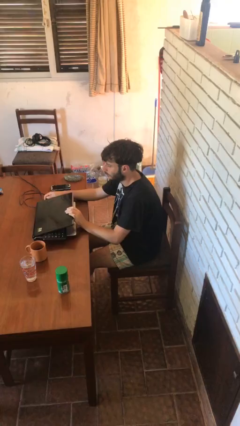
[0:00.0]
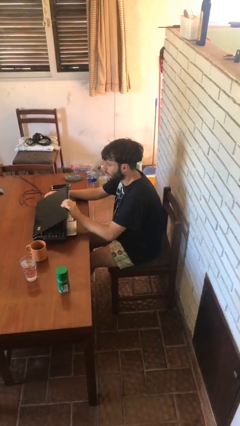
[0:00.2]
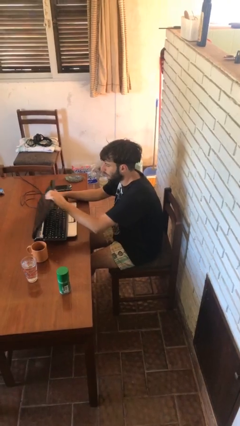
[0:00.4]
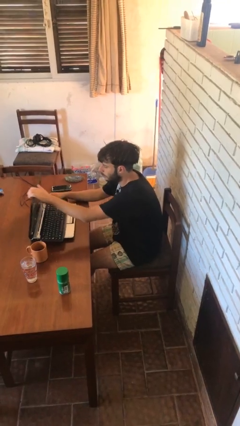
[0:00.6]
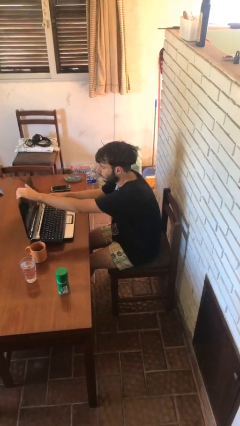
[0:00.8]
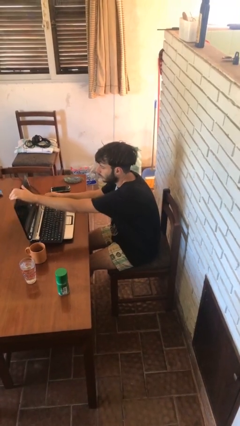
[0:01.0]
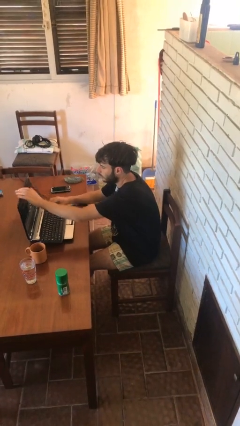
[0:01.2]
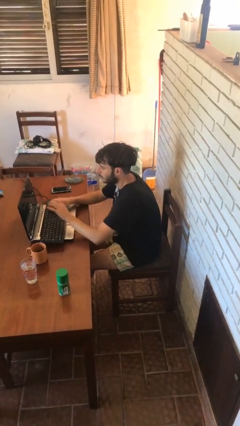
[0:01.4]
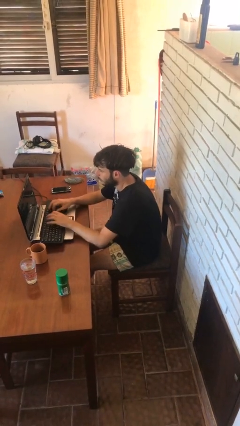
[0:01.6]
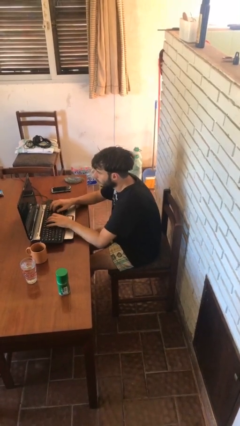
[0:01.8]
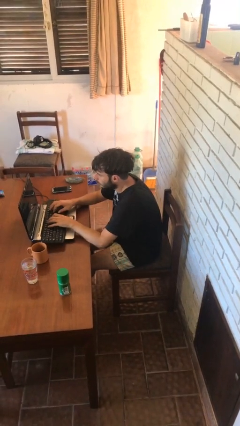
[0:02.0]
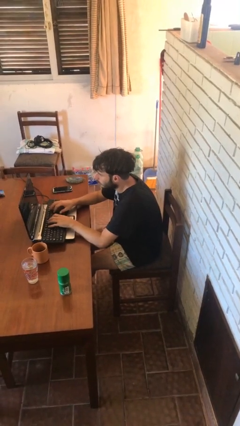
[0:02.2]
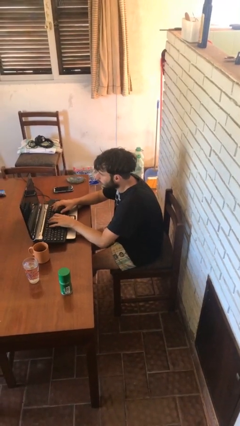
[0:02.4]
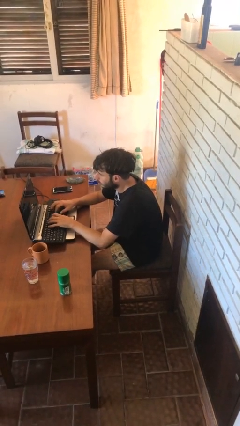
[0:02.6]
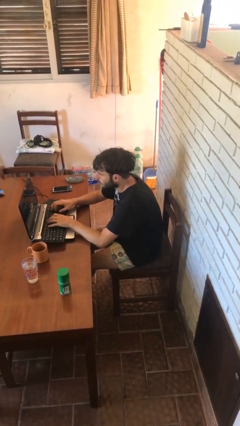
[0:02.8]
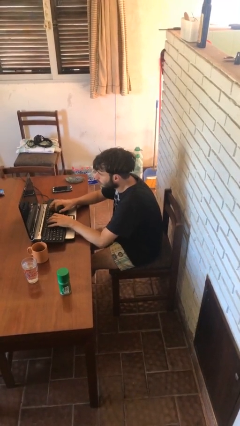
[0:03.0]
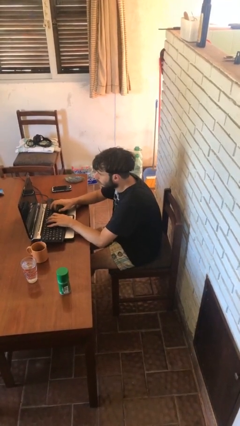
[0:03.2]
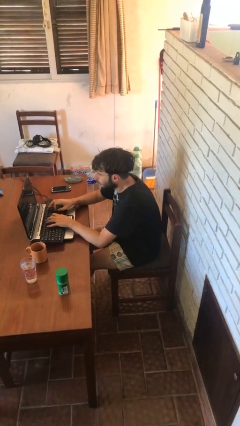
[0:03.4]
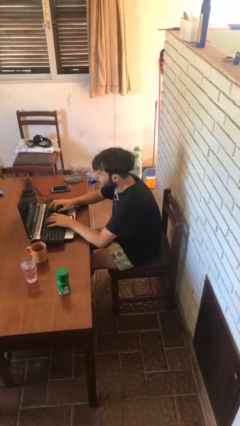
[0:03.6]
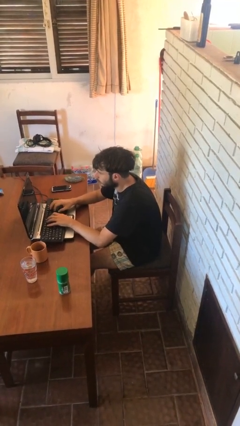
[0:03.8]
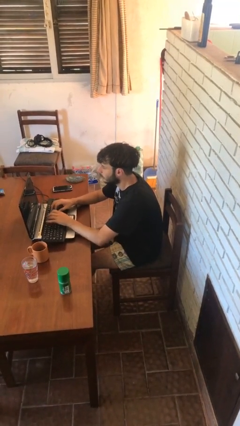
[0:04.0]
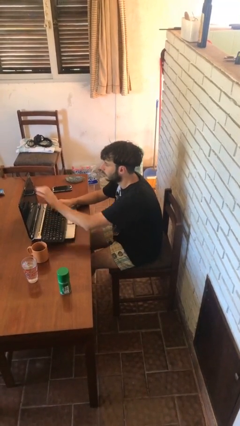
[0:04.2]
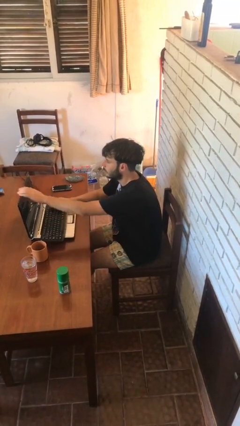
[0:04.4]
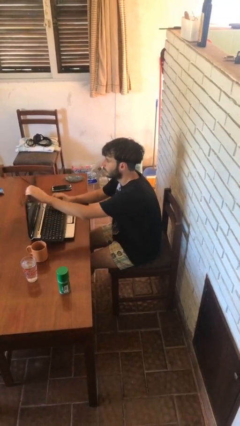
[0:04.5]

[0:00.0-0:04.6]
person interacts with laptop

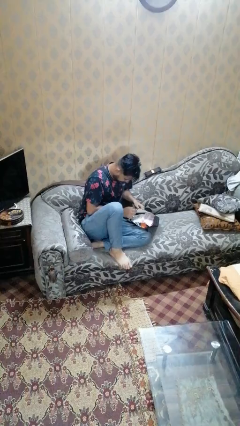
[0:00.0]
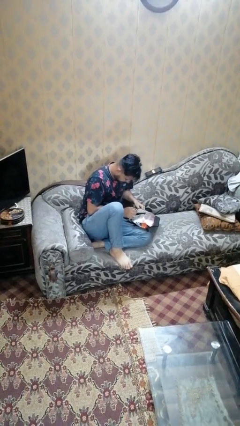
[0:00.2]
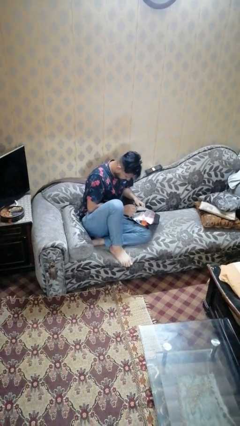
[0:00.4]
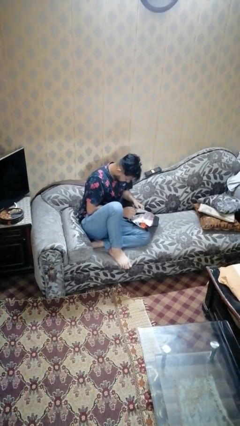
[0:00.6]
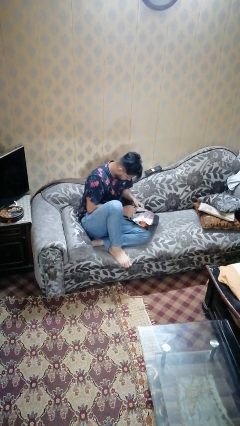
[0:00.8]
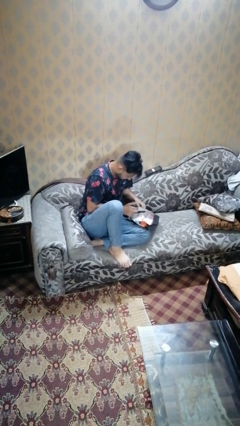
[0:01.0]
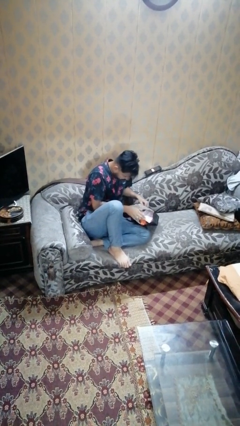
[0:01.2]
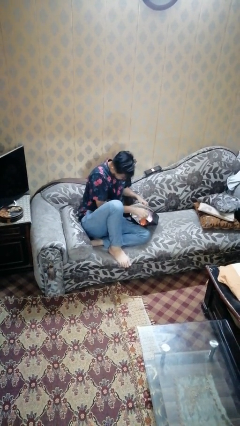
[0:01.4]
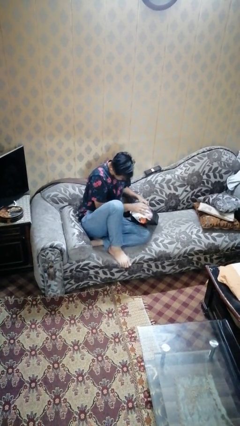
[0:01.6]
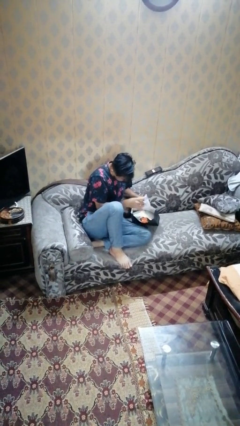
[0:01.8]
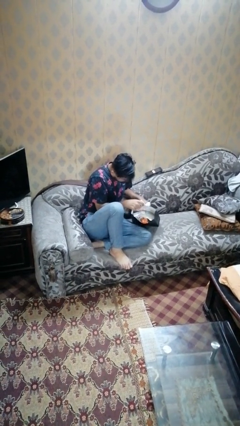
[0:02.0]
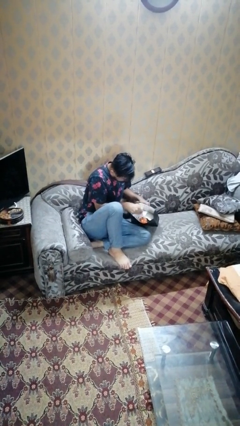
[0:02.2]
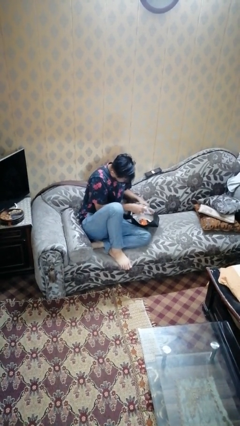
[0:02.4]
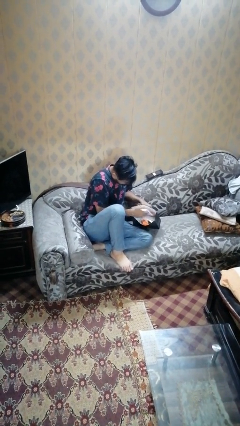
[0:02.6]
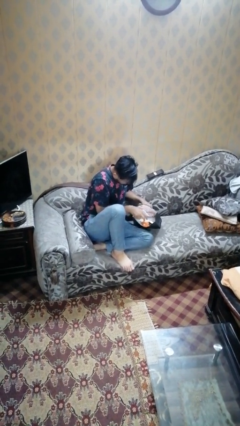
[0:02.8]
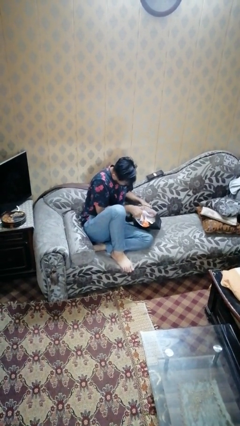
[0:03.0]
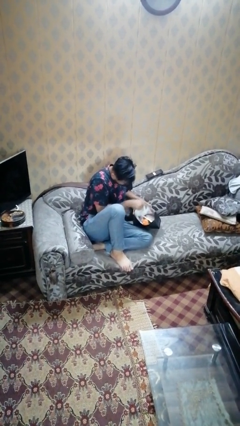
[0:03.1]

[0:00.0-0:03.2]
person searches in bag

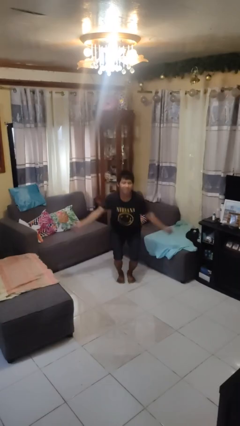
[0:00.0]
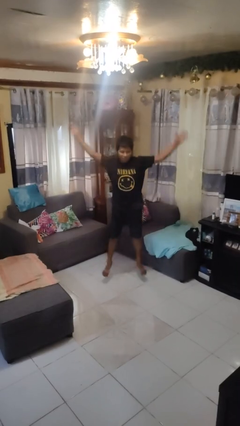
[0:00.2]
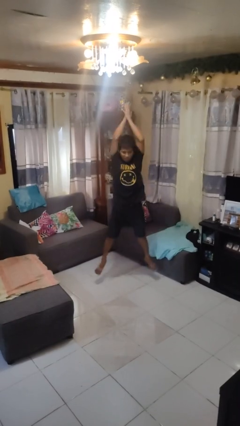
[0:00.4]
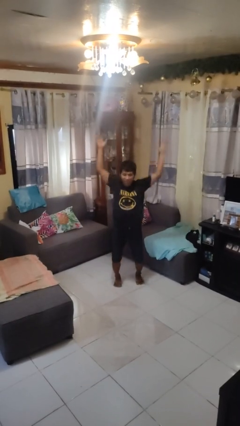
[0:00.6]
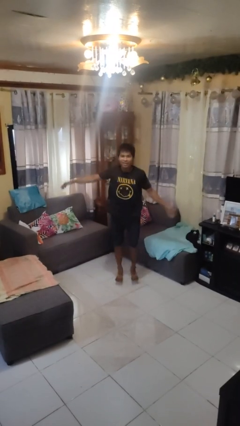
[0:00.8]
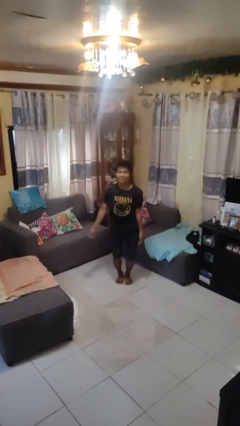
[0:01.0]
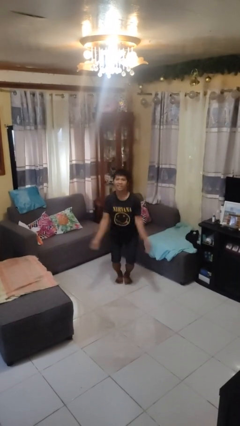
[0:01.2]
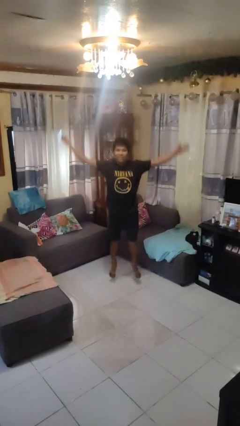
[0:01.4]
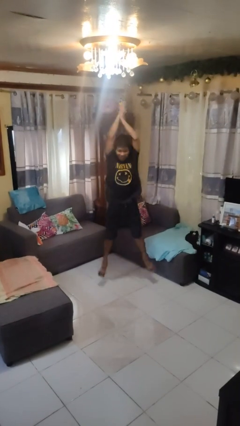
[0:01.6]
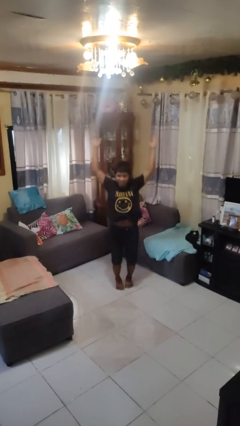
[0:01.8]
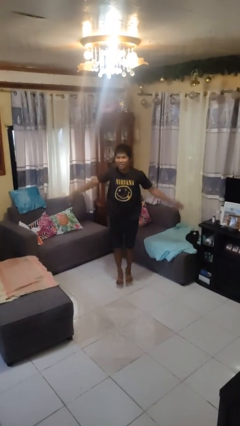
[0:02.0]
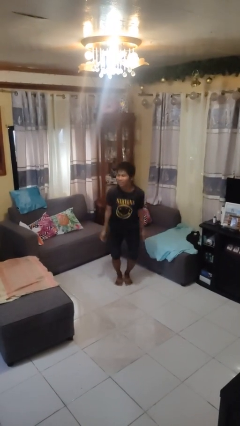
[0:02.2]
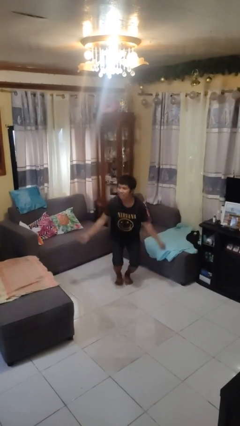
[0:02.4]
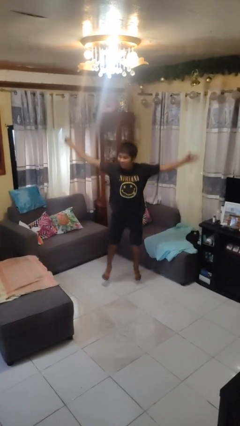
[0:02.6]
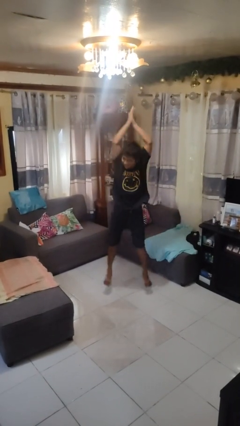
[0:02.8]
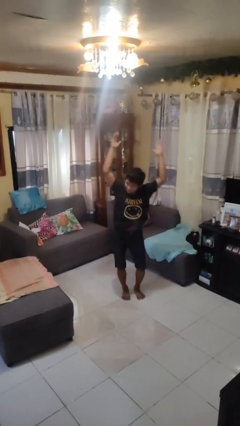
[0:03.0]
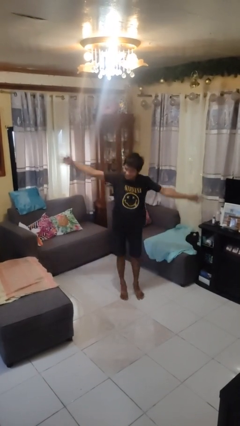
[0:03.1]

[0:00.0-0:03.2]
person exercises with jumping jacks

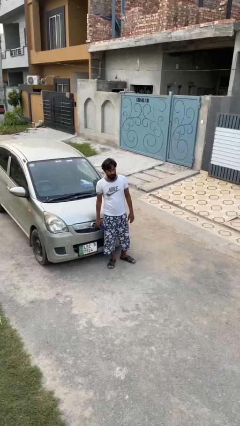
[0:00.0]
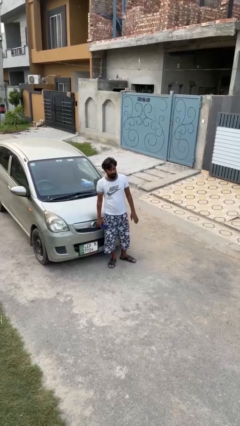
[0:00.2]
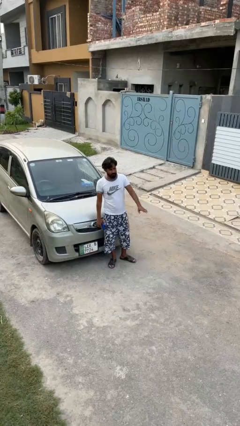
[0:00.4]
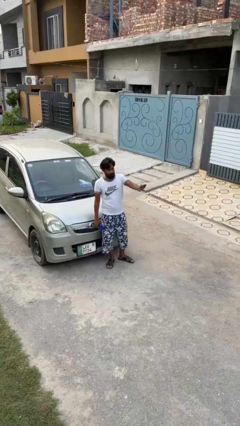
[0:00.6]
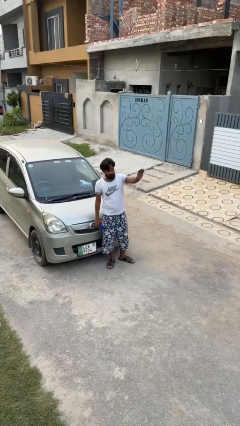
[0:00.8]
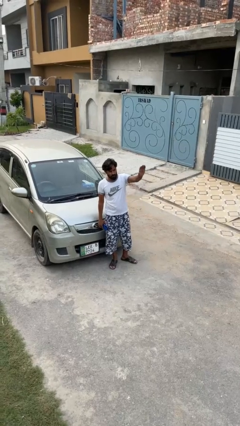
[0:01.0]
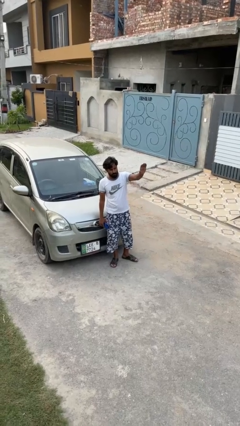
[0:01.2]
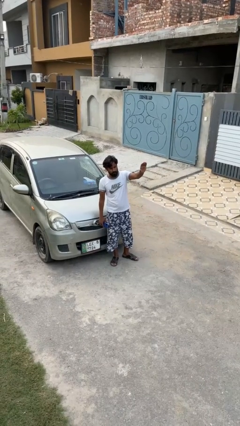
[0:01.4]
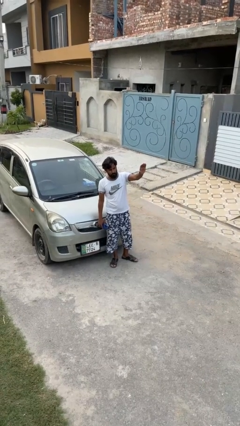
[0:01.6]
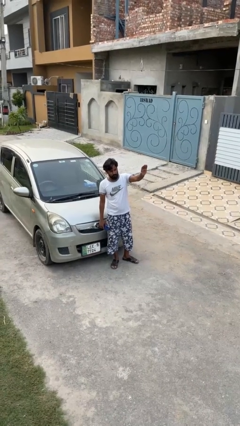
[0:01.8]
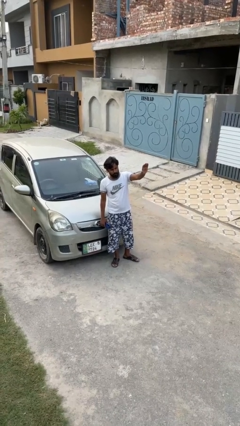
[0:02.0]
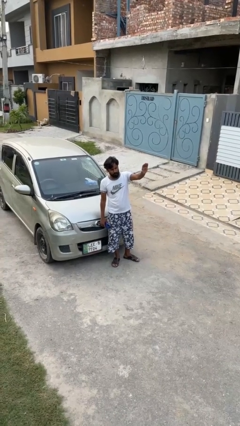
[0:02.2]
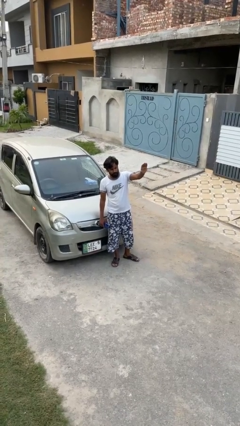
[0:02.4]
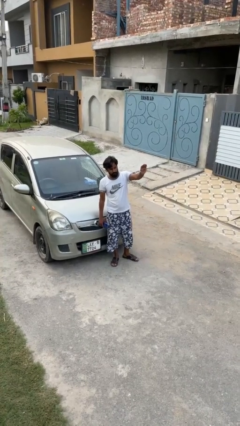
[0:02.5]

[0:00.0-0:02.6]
person gestures raise hand

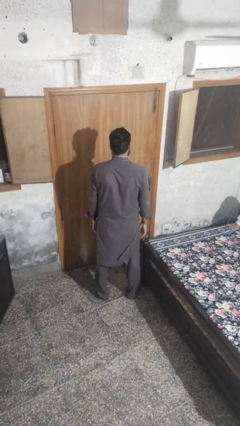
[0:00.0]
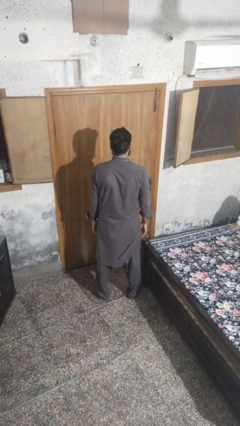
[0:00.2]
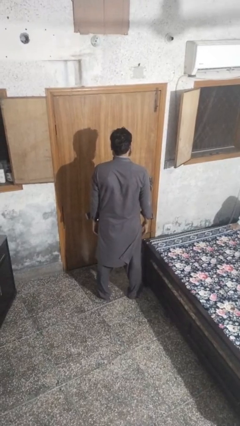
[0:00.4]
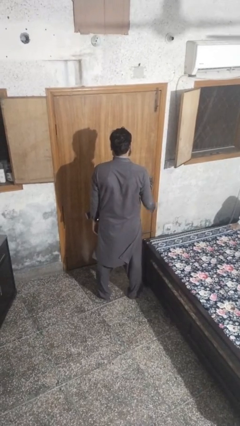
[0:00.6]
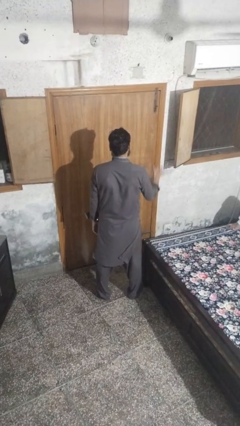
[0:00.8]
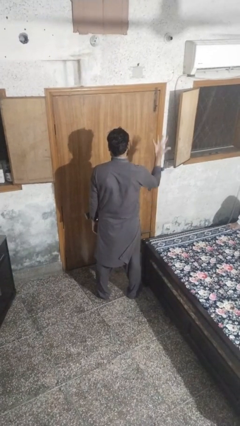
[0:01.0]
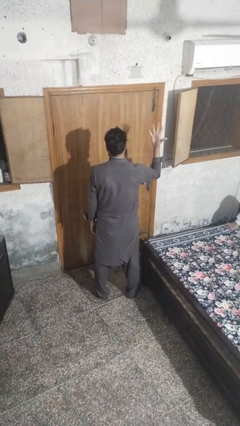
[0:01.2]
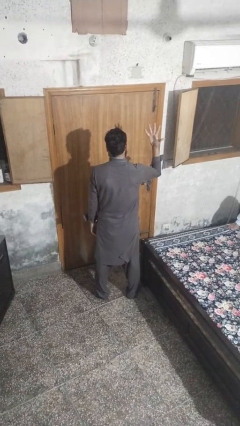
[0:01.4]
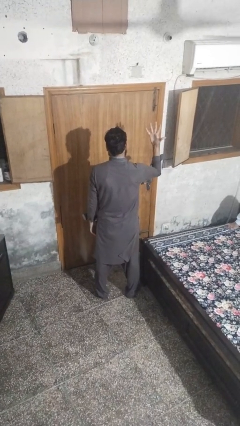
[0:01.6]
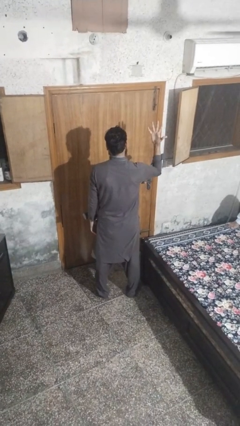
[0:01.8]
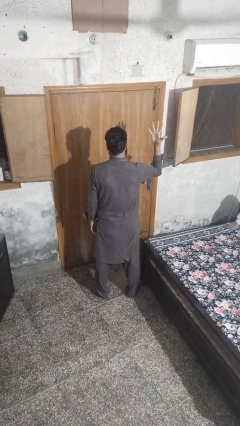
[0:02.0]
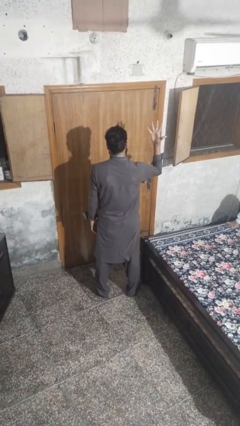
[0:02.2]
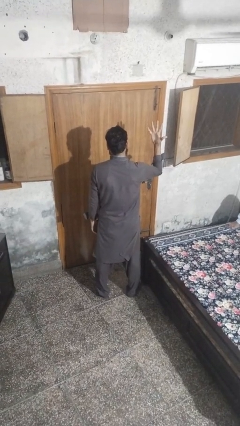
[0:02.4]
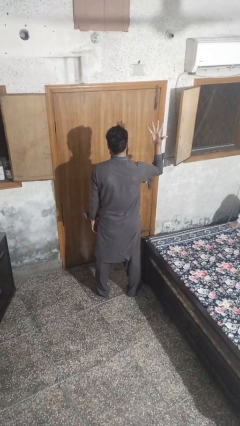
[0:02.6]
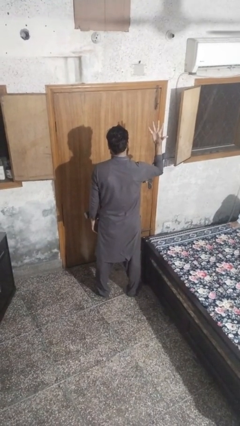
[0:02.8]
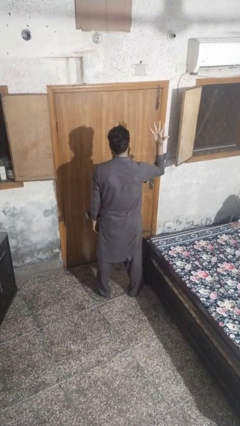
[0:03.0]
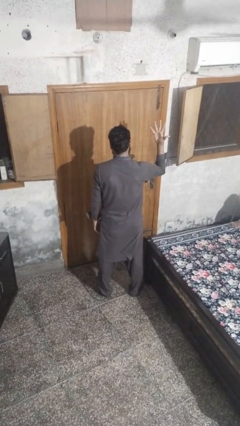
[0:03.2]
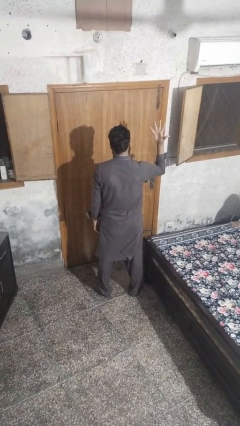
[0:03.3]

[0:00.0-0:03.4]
person gestures number five
